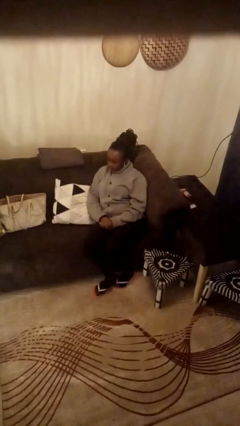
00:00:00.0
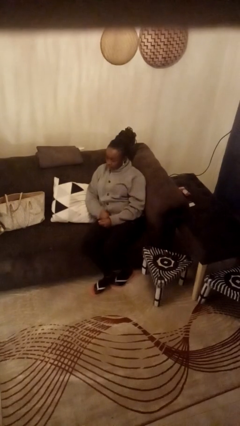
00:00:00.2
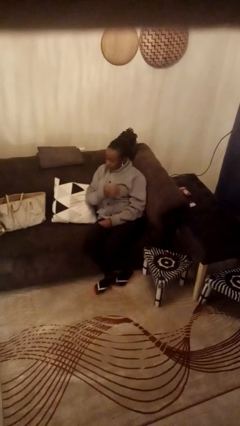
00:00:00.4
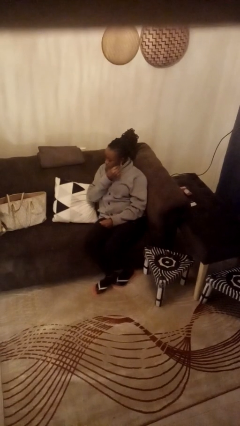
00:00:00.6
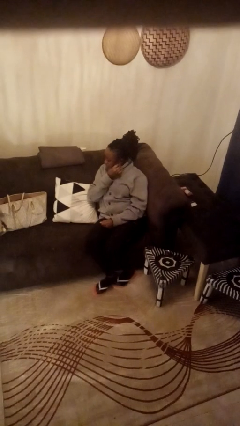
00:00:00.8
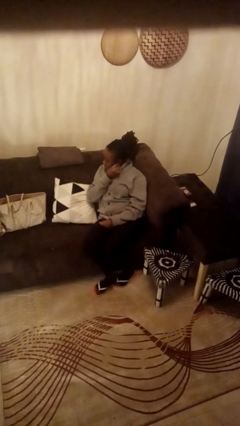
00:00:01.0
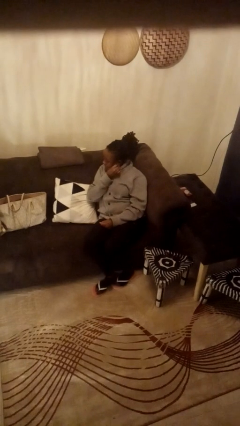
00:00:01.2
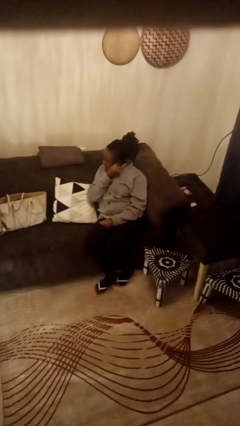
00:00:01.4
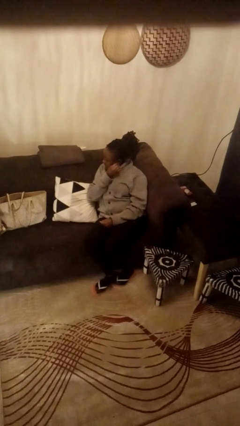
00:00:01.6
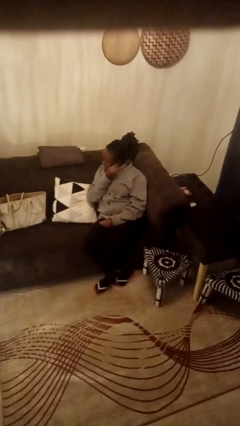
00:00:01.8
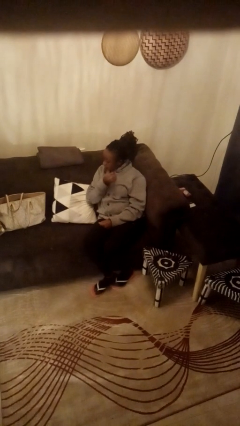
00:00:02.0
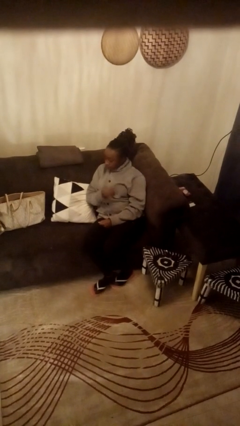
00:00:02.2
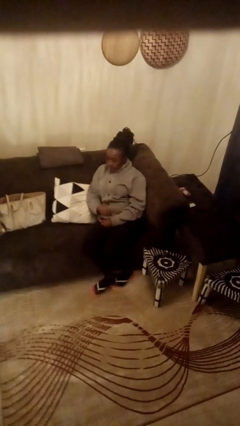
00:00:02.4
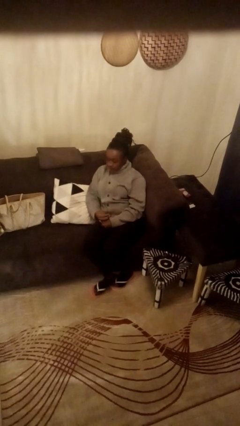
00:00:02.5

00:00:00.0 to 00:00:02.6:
person takes off earrings

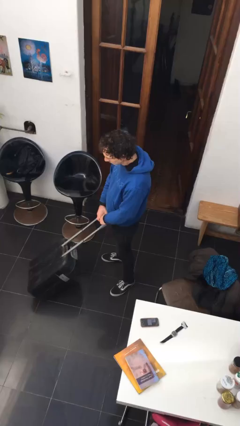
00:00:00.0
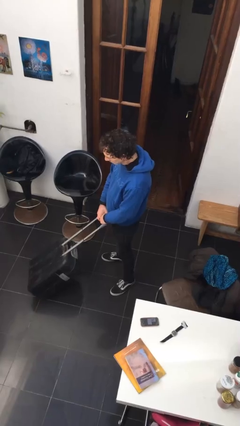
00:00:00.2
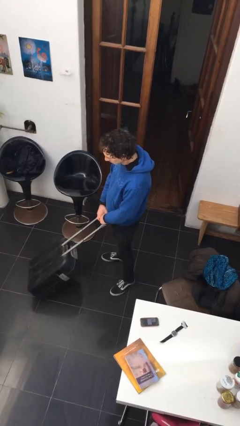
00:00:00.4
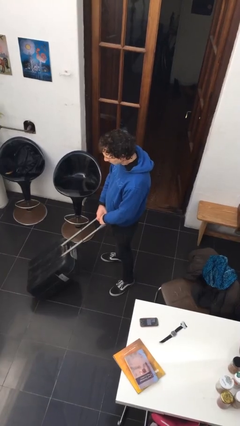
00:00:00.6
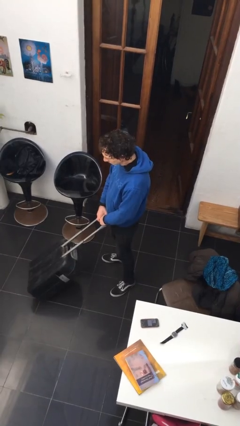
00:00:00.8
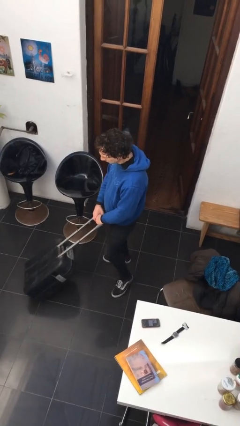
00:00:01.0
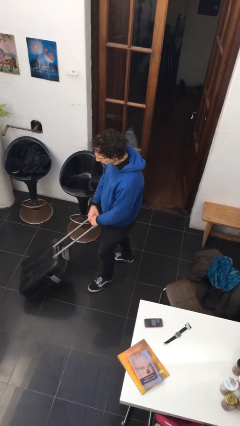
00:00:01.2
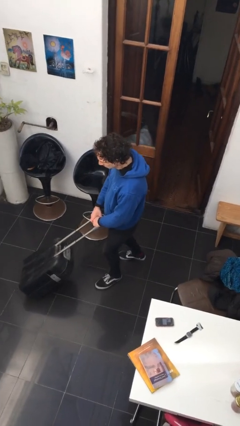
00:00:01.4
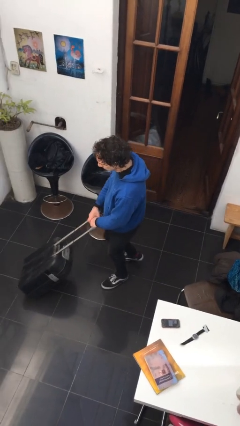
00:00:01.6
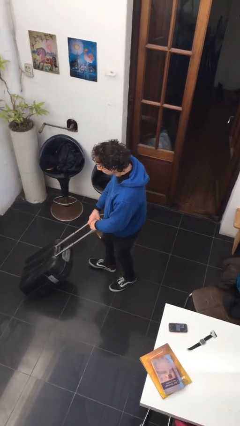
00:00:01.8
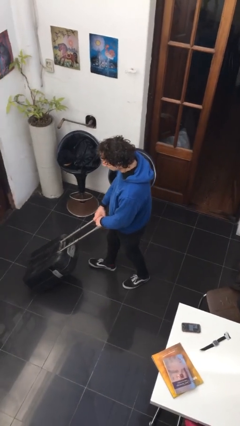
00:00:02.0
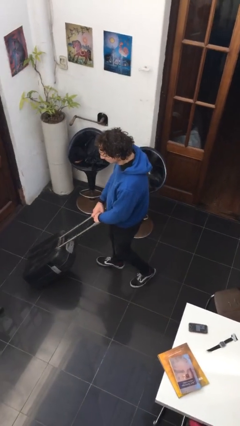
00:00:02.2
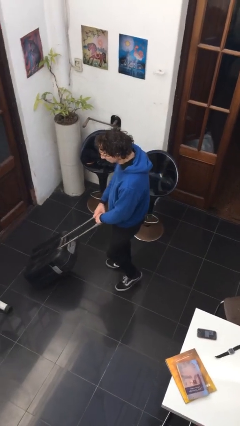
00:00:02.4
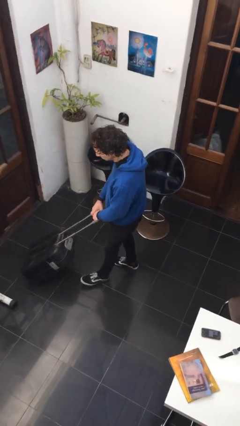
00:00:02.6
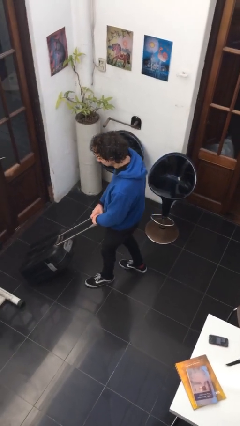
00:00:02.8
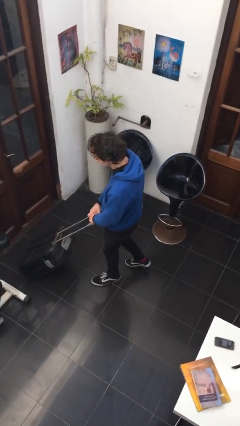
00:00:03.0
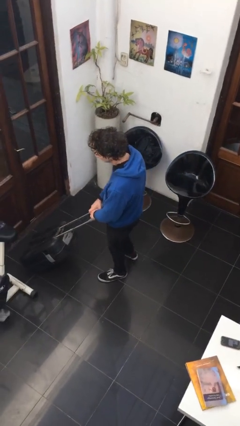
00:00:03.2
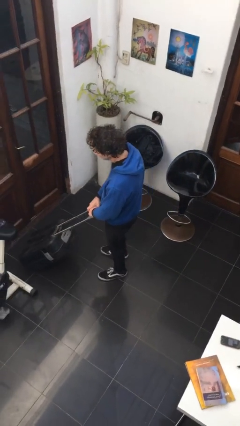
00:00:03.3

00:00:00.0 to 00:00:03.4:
person pushes wheeled cart

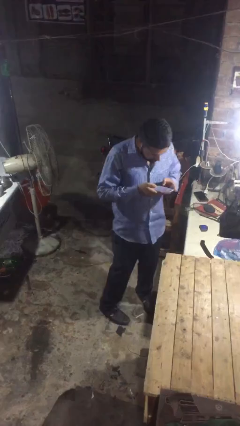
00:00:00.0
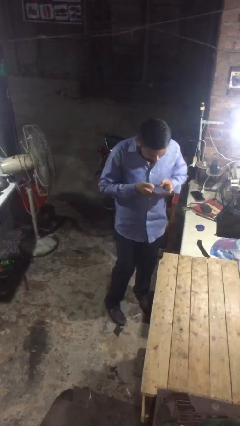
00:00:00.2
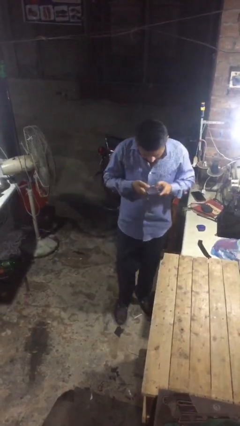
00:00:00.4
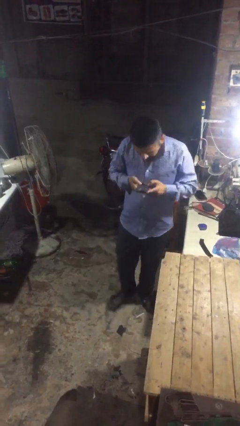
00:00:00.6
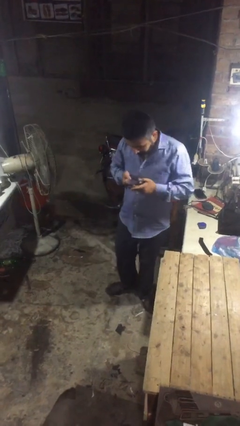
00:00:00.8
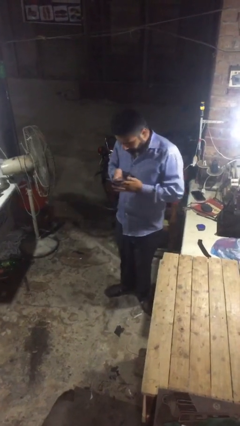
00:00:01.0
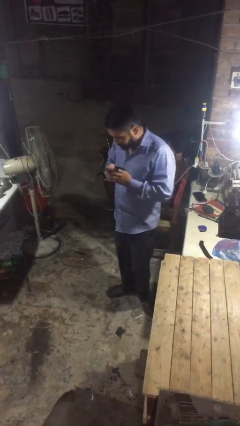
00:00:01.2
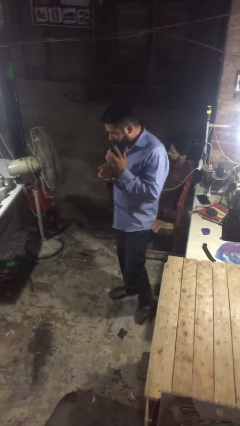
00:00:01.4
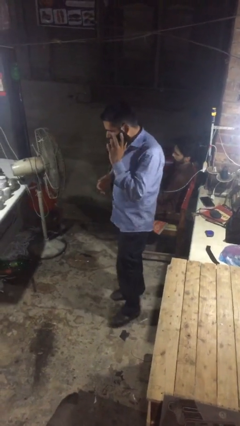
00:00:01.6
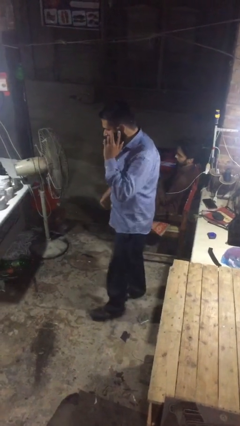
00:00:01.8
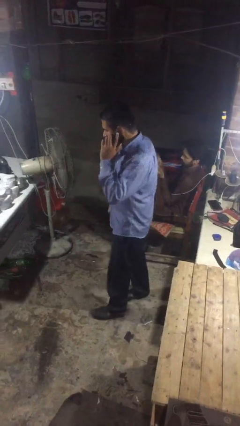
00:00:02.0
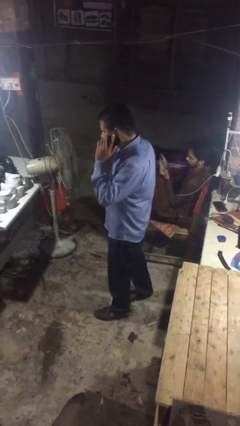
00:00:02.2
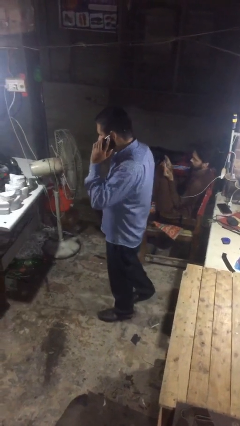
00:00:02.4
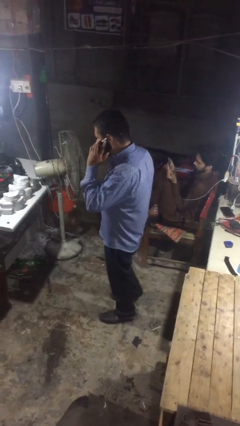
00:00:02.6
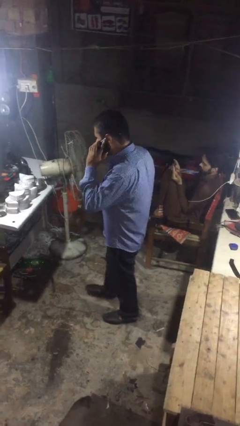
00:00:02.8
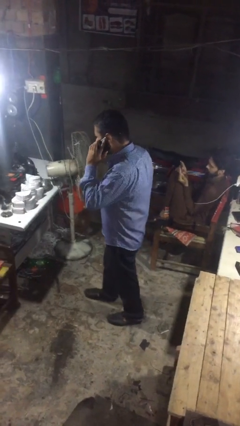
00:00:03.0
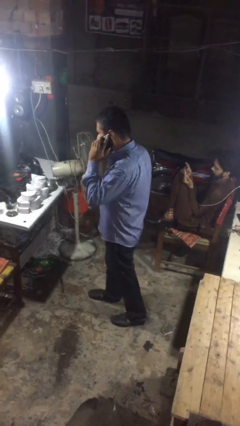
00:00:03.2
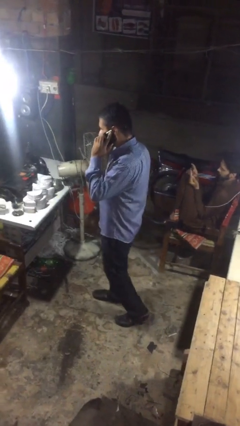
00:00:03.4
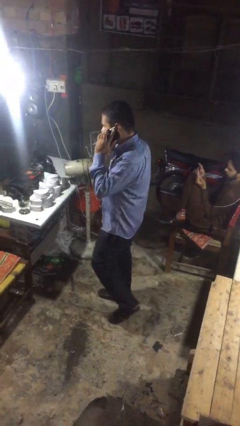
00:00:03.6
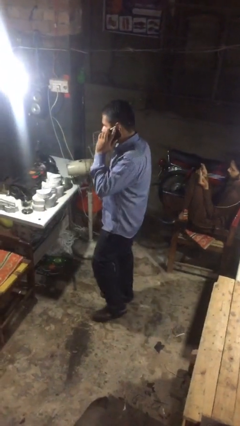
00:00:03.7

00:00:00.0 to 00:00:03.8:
person talks on phone

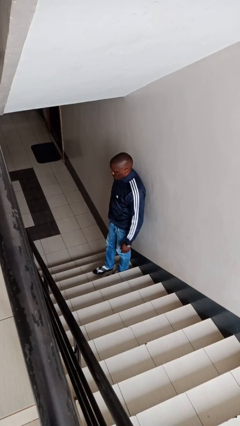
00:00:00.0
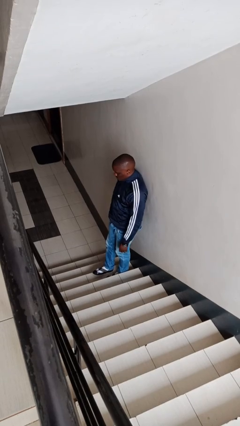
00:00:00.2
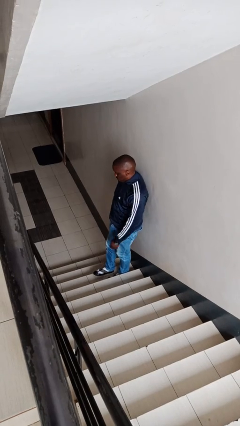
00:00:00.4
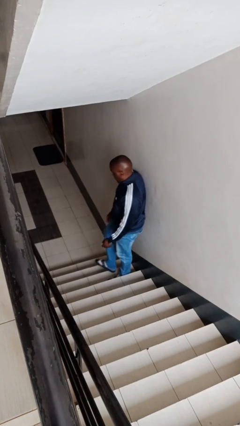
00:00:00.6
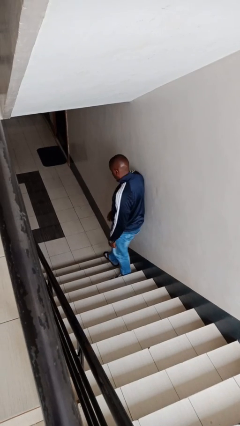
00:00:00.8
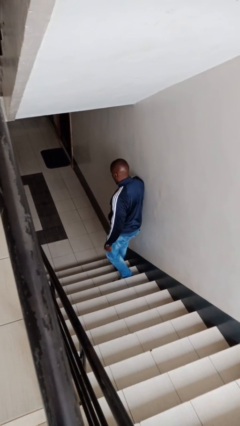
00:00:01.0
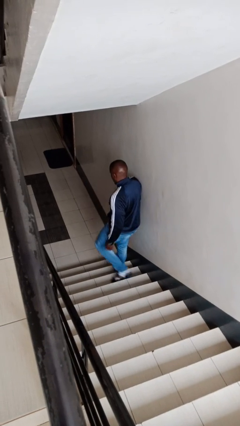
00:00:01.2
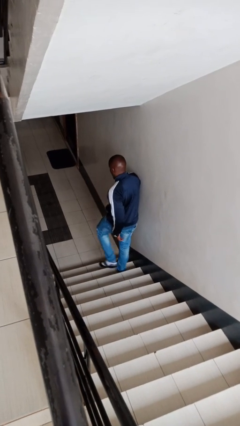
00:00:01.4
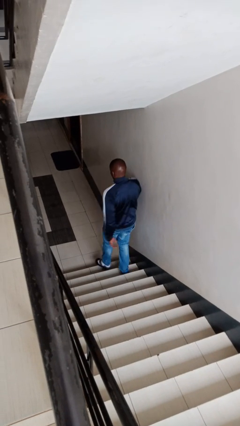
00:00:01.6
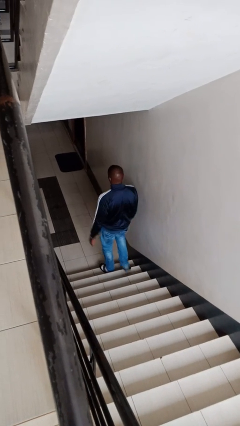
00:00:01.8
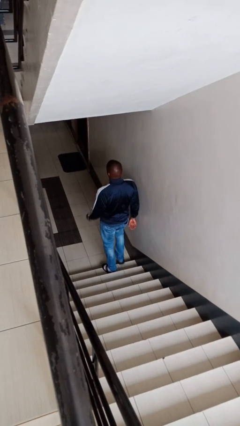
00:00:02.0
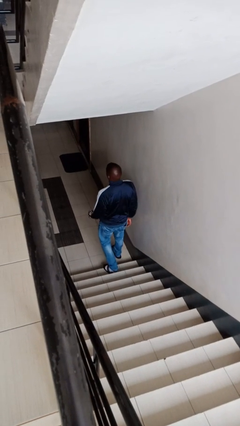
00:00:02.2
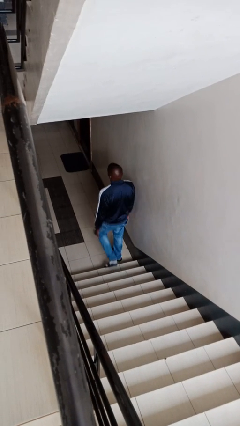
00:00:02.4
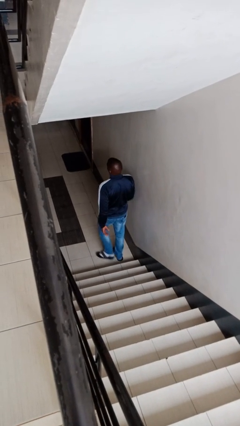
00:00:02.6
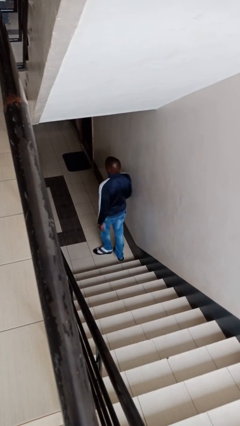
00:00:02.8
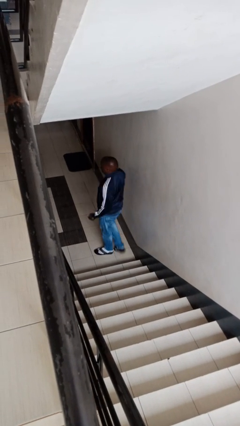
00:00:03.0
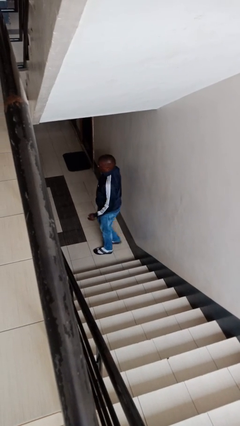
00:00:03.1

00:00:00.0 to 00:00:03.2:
person climbs down stairs

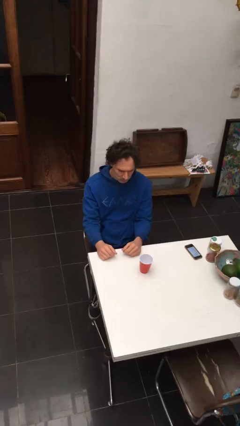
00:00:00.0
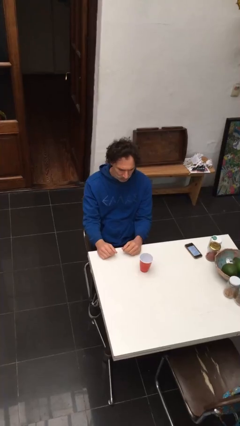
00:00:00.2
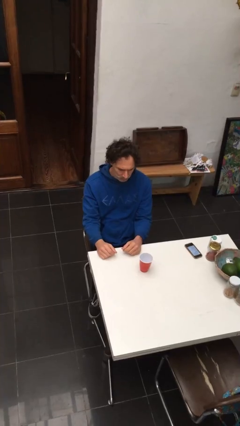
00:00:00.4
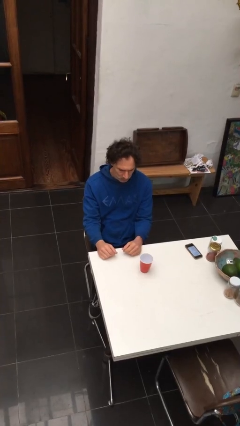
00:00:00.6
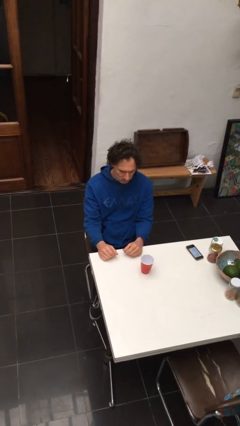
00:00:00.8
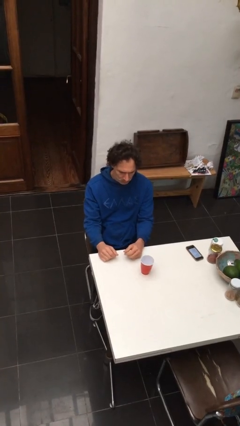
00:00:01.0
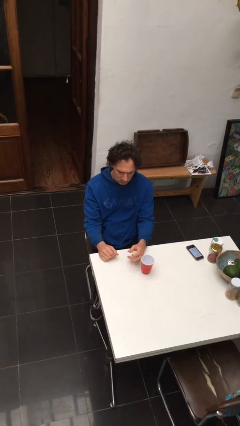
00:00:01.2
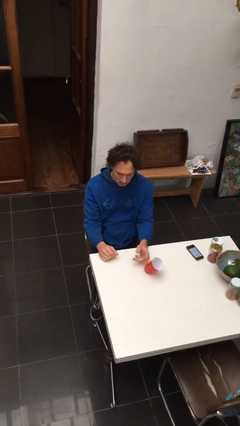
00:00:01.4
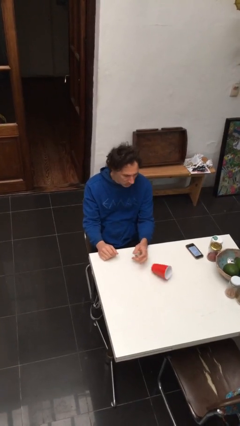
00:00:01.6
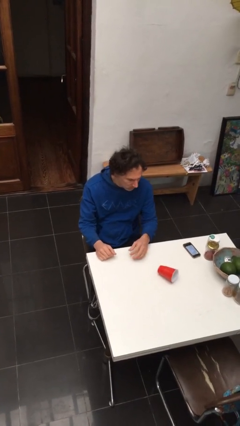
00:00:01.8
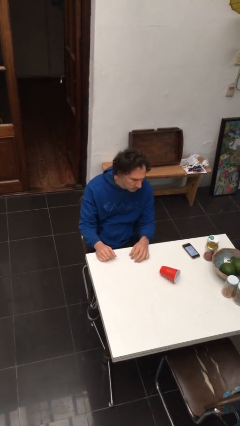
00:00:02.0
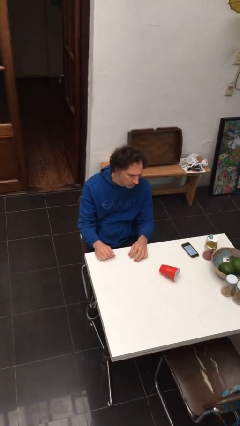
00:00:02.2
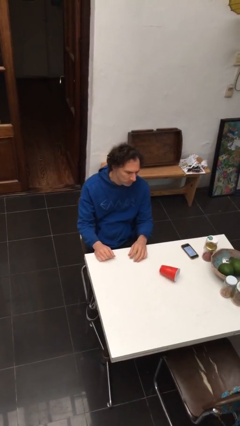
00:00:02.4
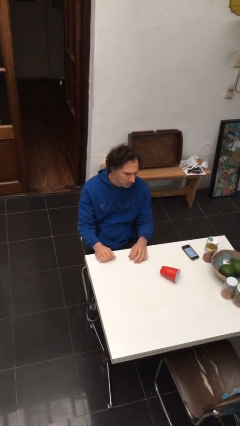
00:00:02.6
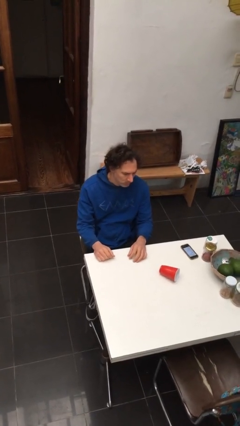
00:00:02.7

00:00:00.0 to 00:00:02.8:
person knocks over glass

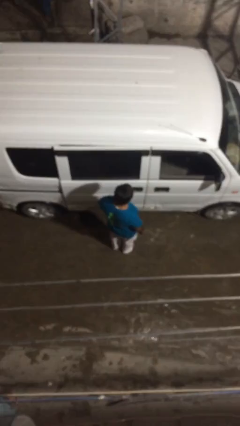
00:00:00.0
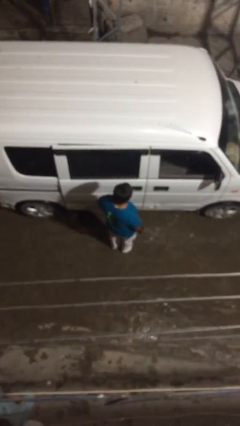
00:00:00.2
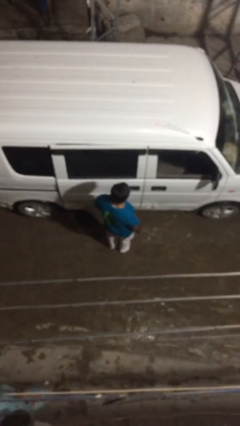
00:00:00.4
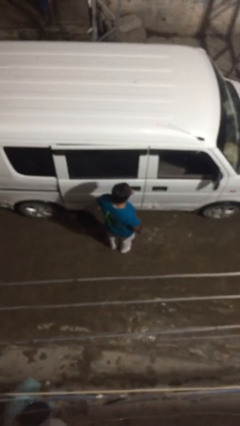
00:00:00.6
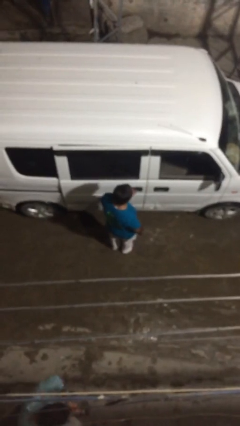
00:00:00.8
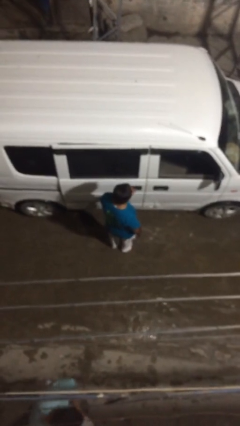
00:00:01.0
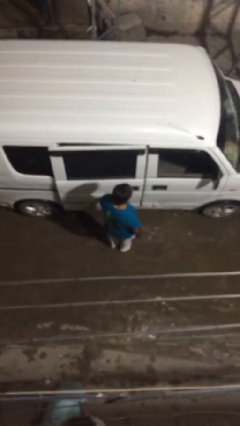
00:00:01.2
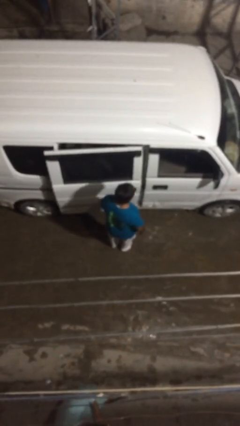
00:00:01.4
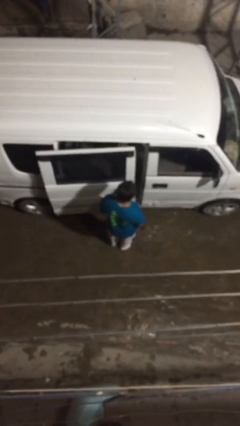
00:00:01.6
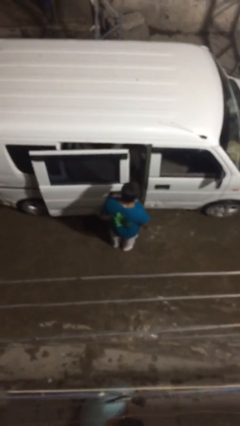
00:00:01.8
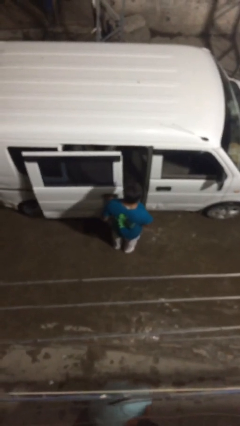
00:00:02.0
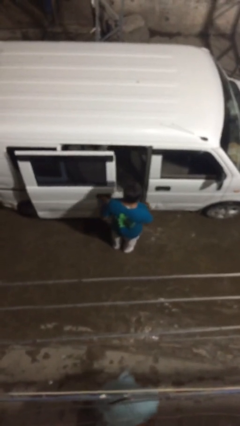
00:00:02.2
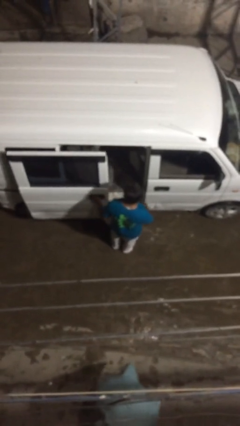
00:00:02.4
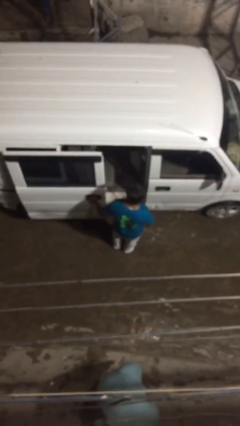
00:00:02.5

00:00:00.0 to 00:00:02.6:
person opens car door
